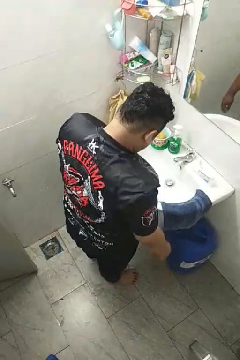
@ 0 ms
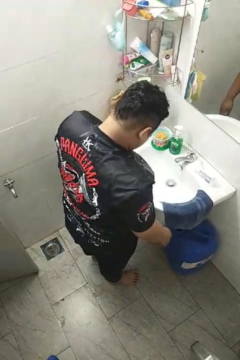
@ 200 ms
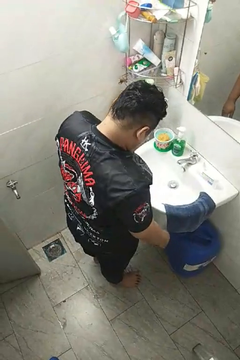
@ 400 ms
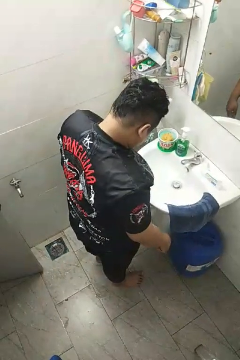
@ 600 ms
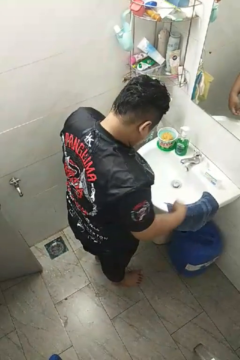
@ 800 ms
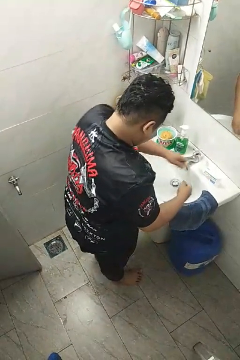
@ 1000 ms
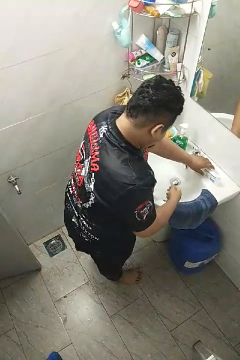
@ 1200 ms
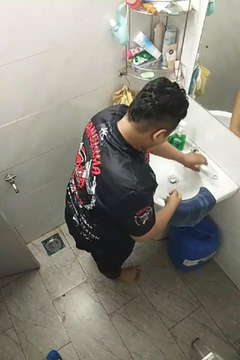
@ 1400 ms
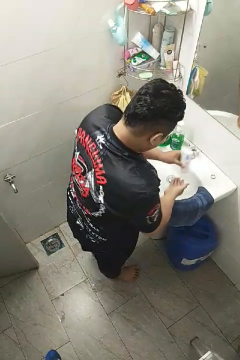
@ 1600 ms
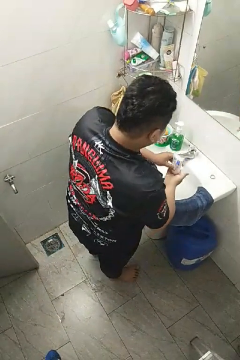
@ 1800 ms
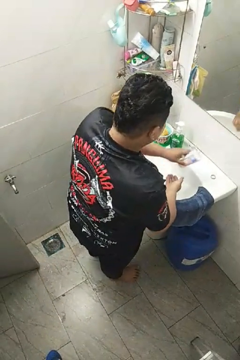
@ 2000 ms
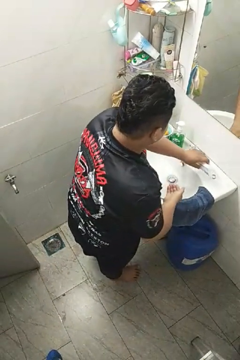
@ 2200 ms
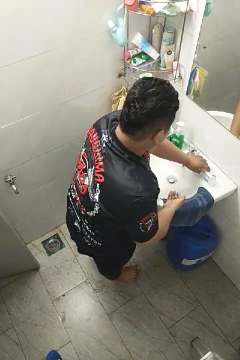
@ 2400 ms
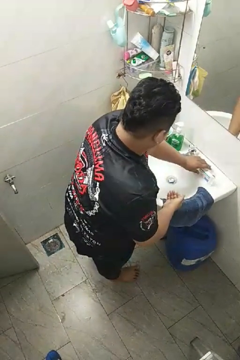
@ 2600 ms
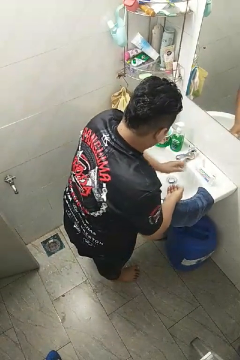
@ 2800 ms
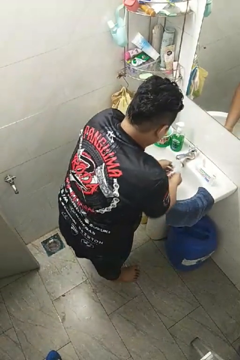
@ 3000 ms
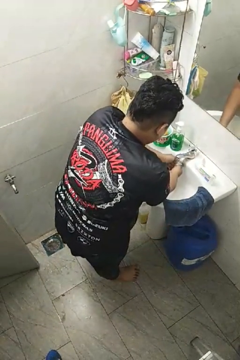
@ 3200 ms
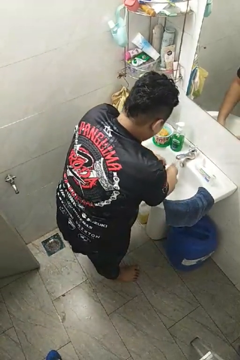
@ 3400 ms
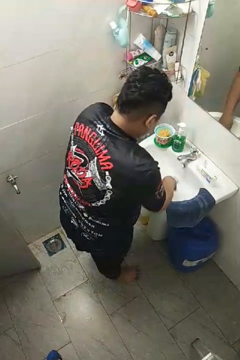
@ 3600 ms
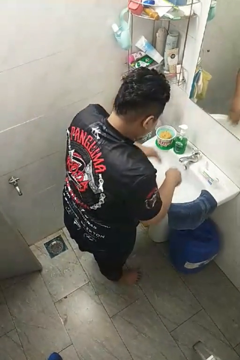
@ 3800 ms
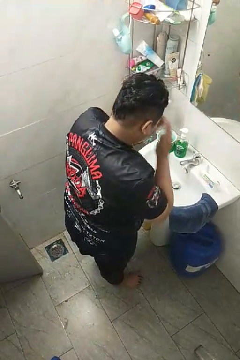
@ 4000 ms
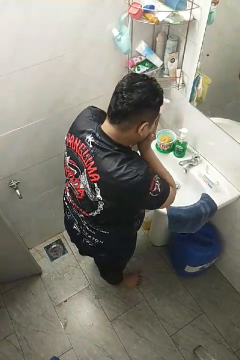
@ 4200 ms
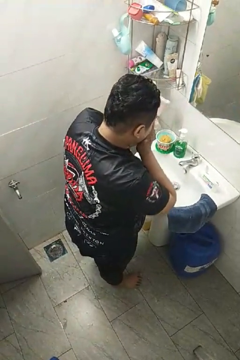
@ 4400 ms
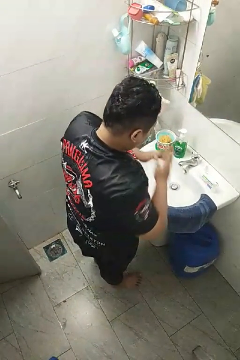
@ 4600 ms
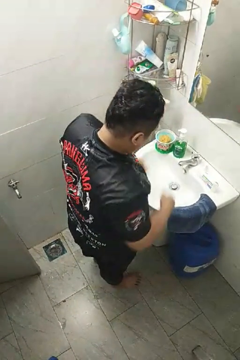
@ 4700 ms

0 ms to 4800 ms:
person washes face

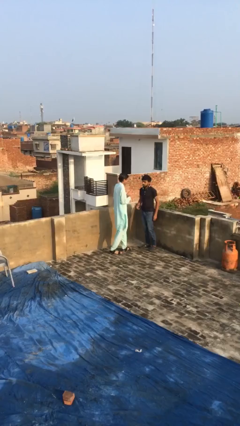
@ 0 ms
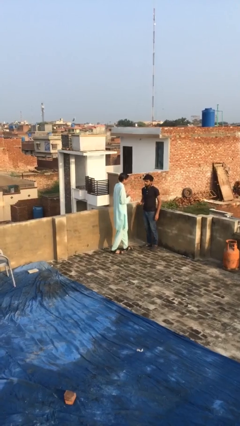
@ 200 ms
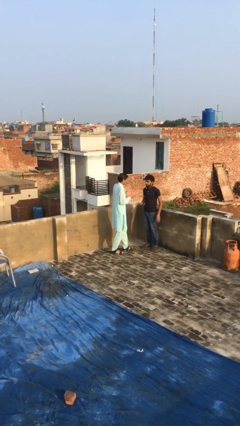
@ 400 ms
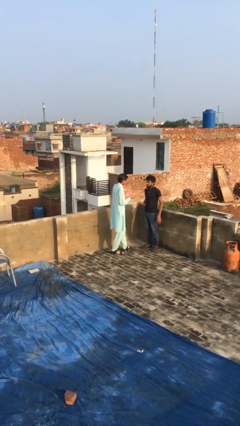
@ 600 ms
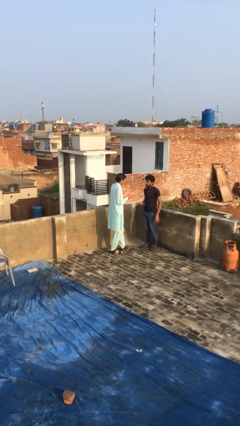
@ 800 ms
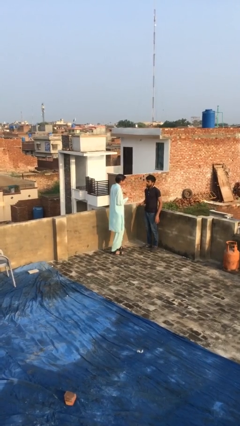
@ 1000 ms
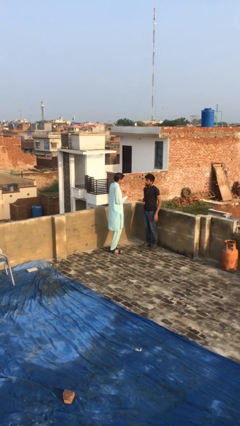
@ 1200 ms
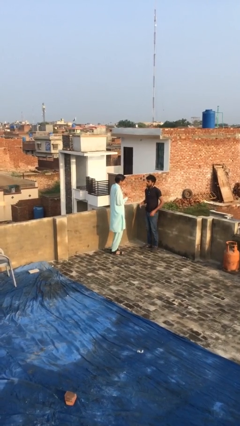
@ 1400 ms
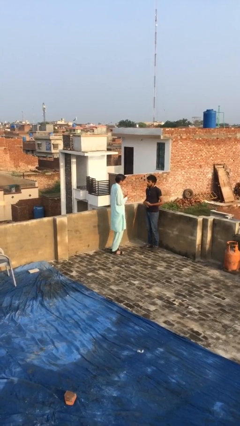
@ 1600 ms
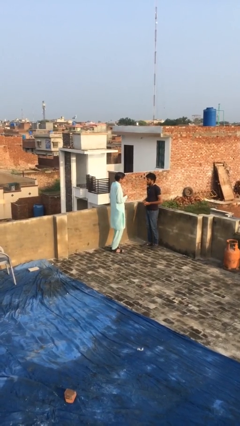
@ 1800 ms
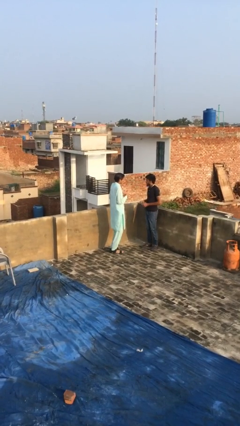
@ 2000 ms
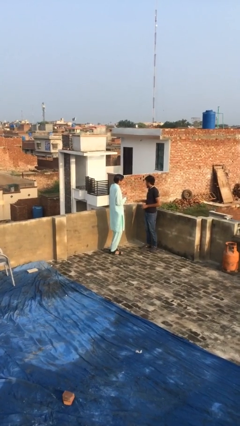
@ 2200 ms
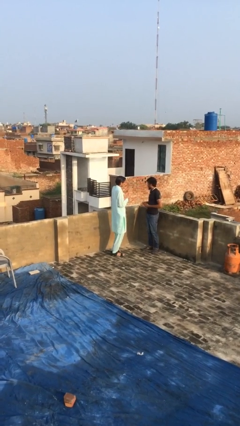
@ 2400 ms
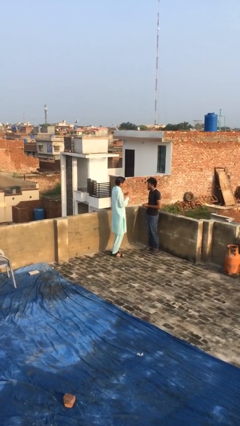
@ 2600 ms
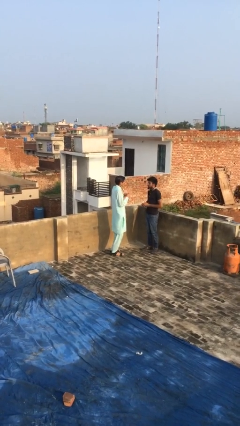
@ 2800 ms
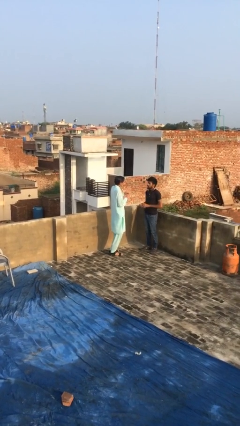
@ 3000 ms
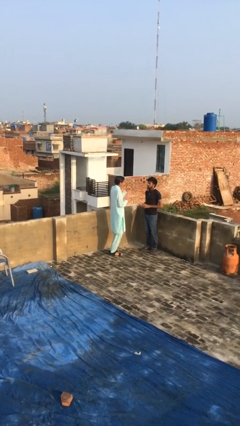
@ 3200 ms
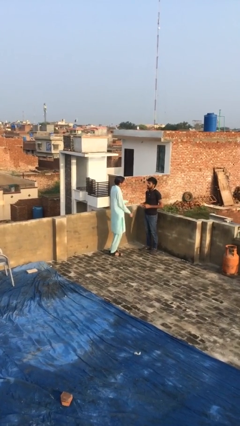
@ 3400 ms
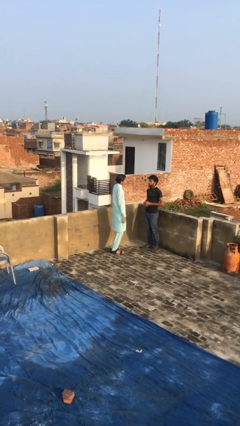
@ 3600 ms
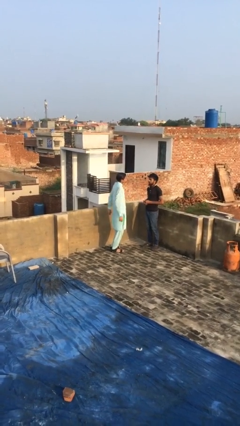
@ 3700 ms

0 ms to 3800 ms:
person talks to person

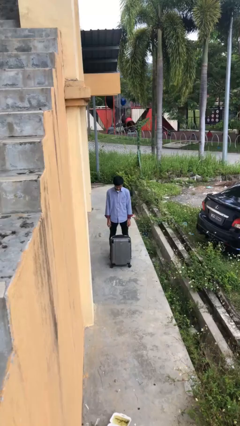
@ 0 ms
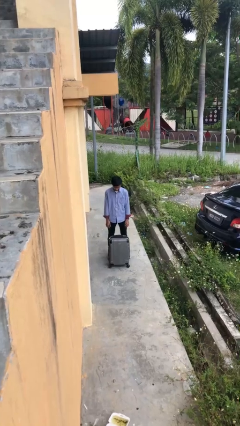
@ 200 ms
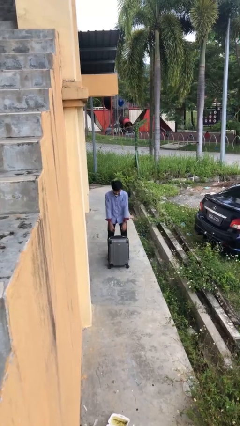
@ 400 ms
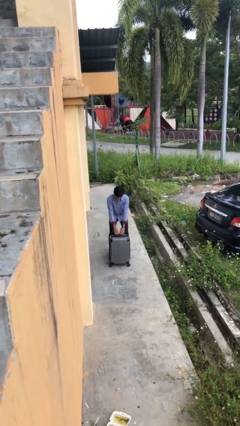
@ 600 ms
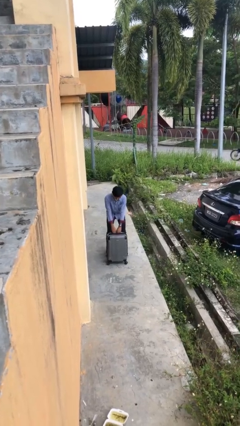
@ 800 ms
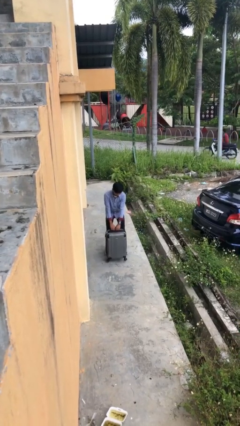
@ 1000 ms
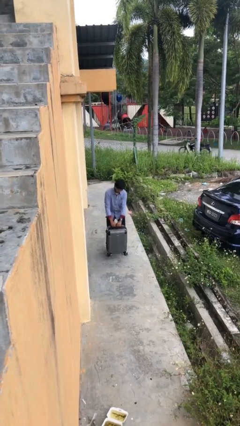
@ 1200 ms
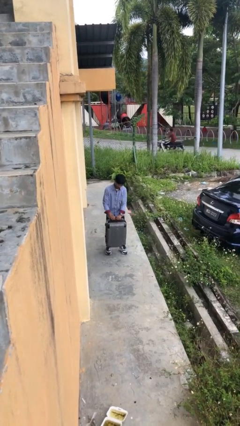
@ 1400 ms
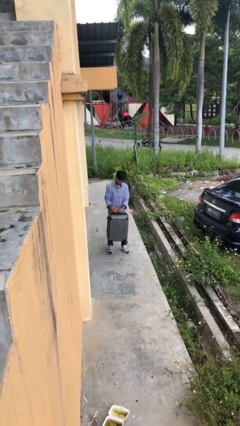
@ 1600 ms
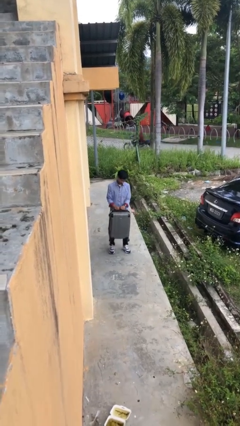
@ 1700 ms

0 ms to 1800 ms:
person picks up object from floor

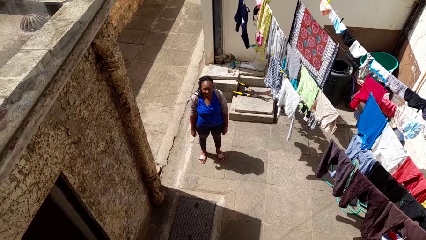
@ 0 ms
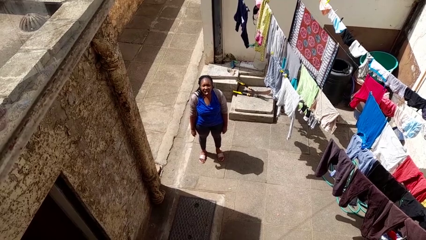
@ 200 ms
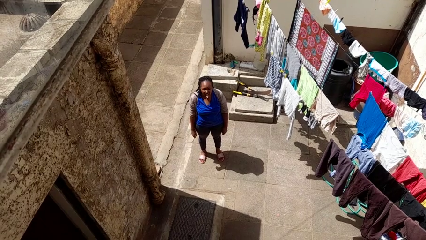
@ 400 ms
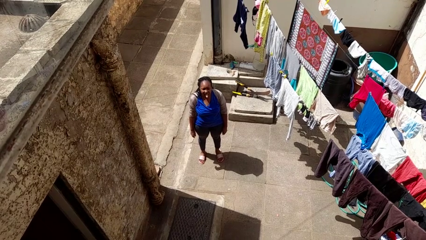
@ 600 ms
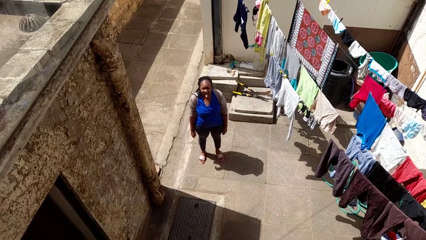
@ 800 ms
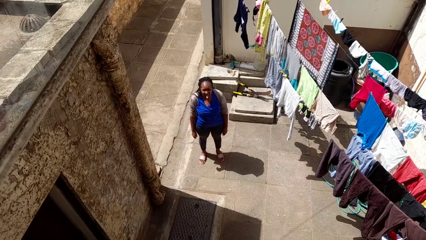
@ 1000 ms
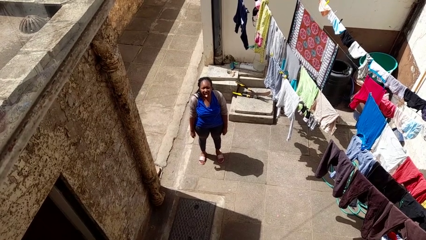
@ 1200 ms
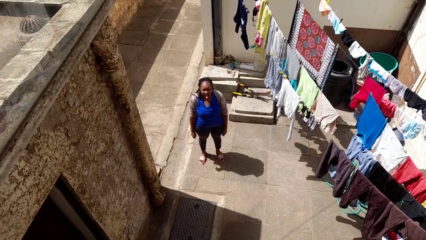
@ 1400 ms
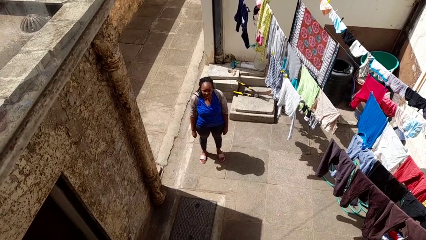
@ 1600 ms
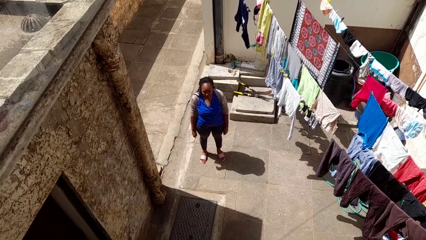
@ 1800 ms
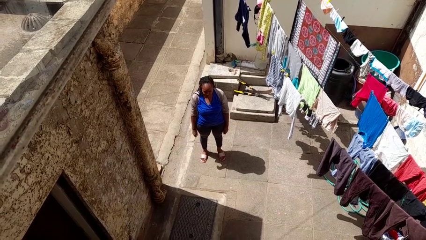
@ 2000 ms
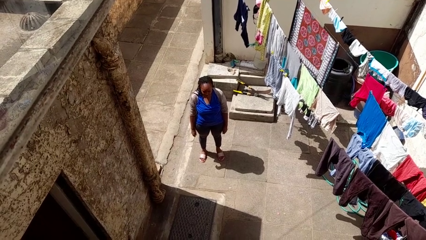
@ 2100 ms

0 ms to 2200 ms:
person sticks out tongue

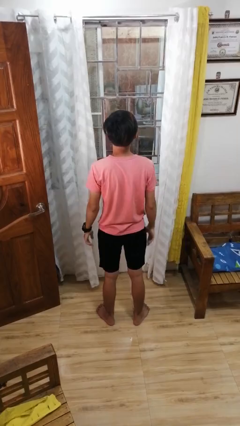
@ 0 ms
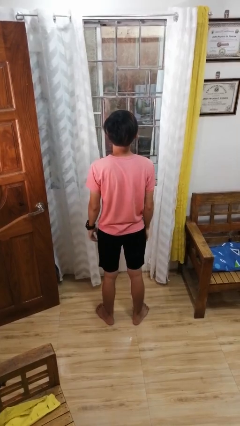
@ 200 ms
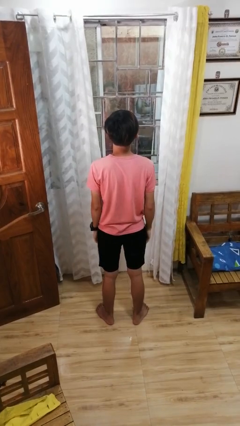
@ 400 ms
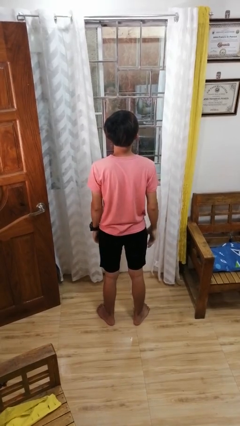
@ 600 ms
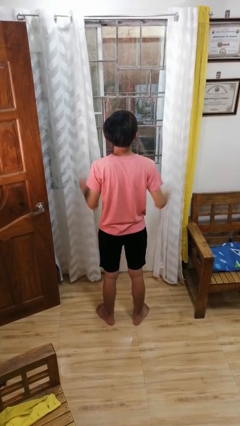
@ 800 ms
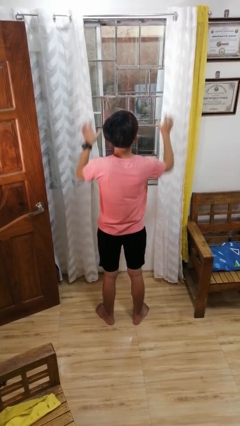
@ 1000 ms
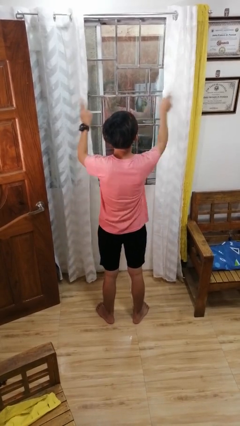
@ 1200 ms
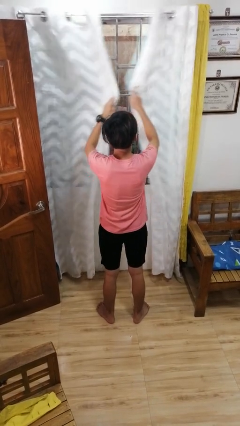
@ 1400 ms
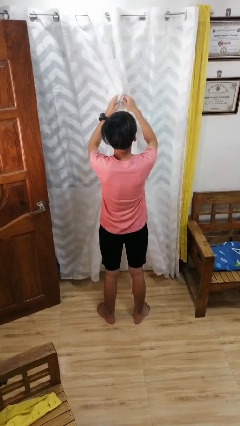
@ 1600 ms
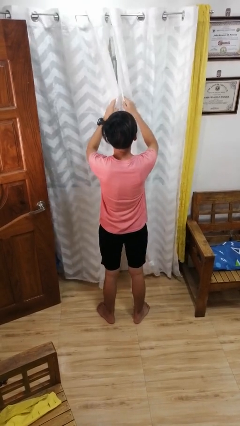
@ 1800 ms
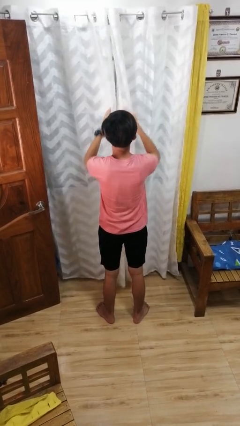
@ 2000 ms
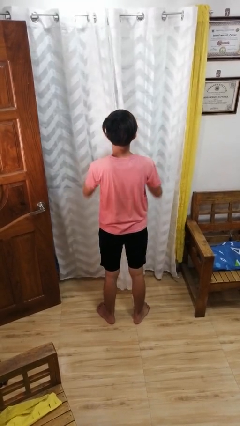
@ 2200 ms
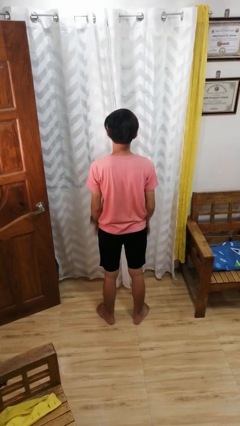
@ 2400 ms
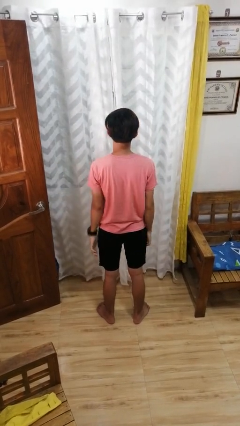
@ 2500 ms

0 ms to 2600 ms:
person closes curtains

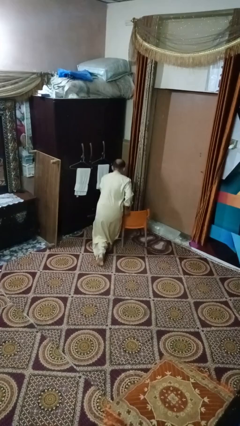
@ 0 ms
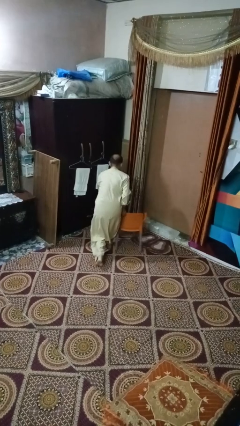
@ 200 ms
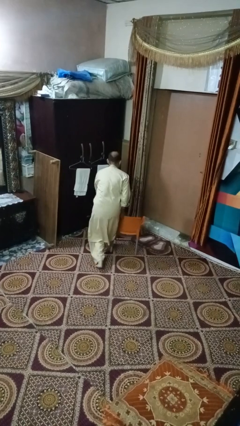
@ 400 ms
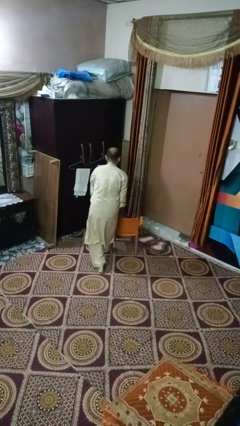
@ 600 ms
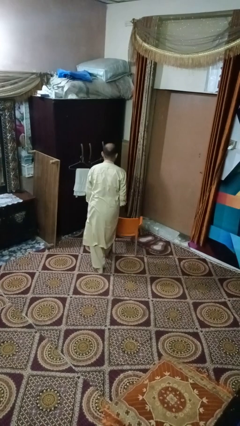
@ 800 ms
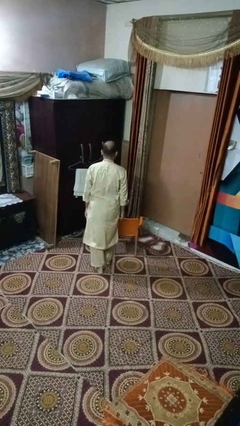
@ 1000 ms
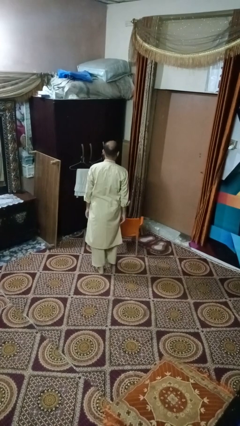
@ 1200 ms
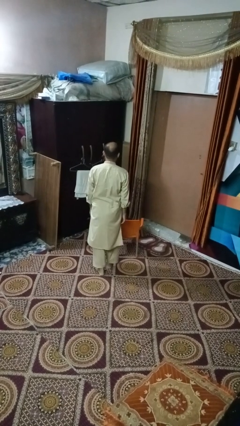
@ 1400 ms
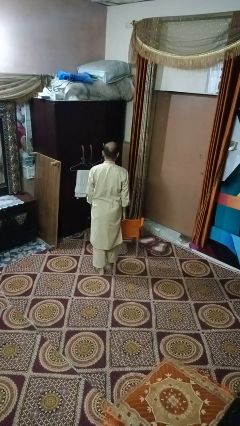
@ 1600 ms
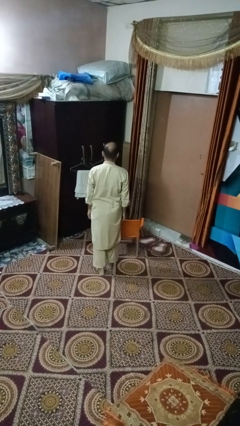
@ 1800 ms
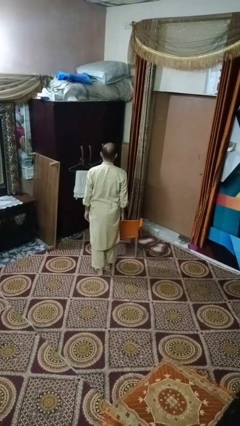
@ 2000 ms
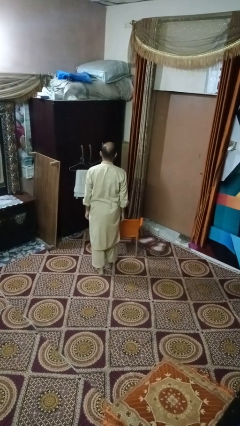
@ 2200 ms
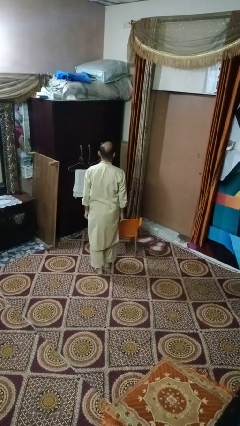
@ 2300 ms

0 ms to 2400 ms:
person stands up from floor

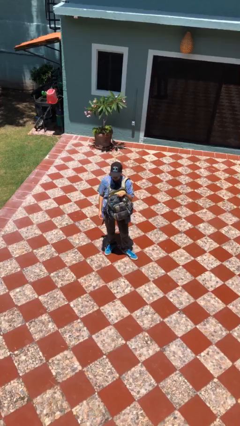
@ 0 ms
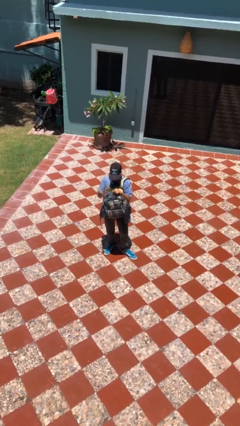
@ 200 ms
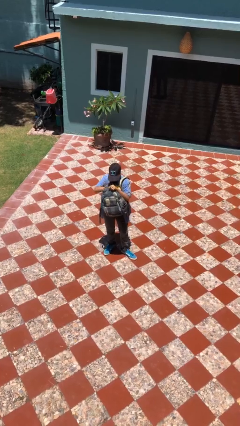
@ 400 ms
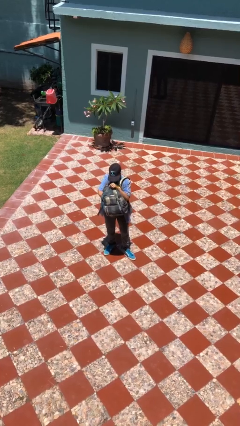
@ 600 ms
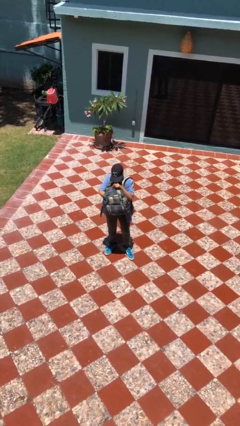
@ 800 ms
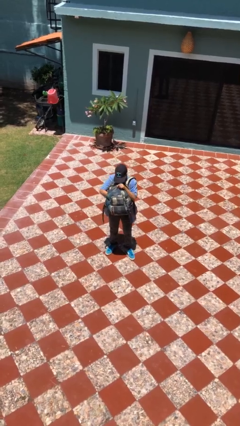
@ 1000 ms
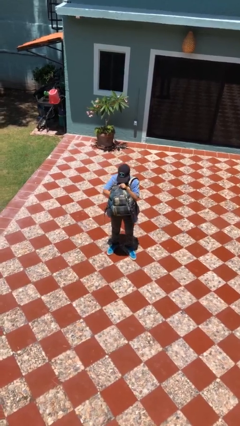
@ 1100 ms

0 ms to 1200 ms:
person searches in backpack
